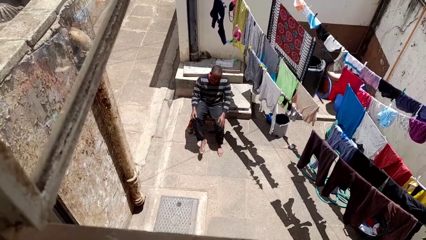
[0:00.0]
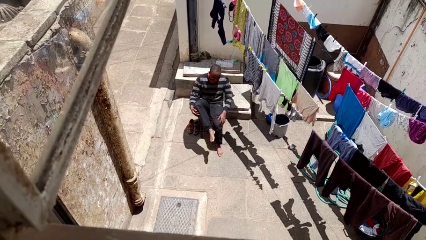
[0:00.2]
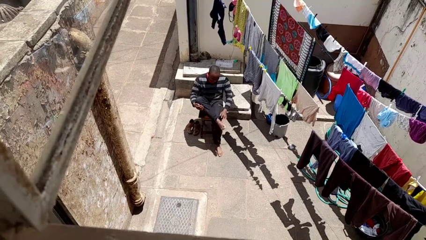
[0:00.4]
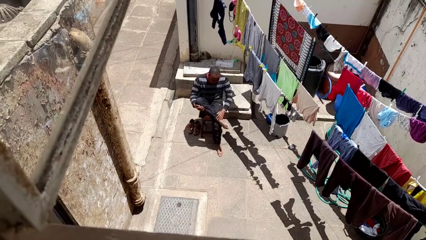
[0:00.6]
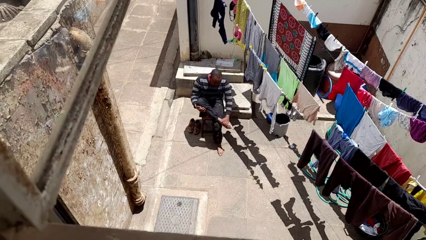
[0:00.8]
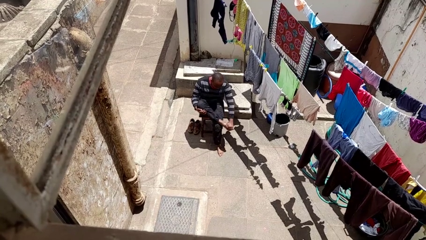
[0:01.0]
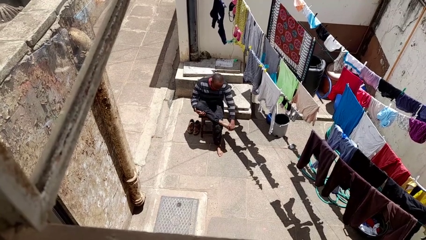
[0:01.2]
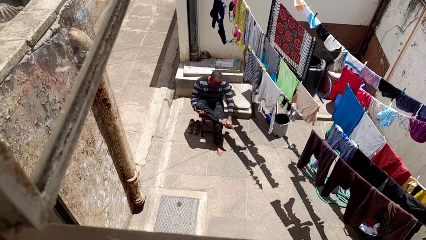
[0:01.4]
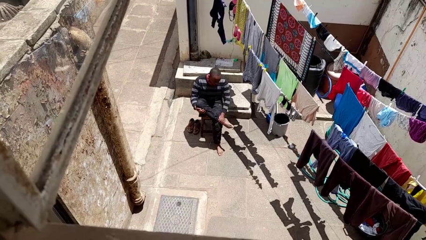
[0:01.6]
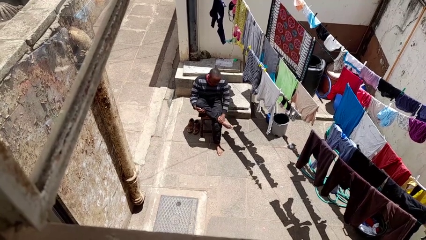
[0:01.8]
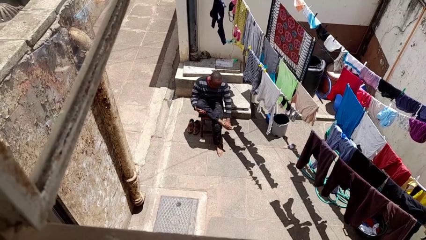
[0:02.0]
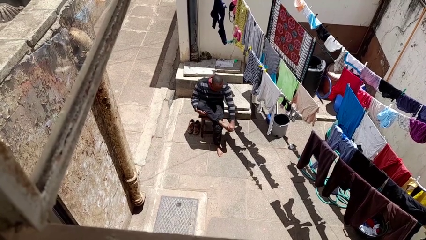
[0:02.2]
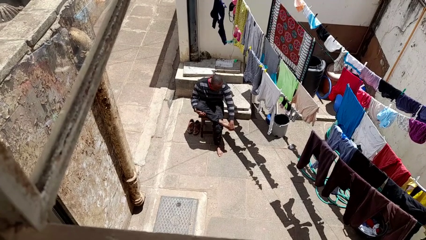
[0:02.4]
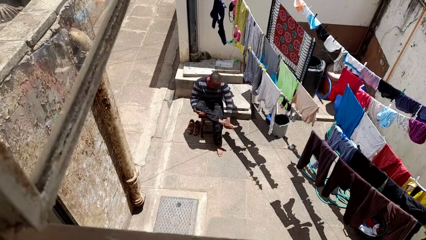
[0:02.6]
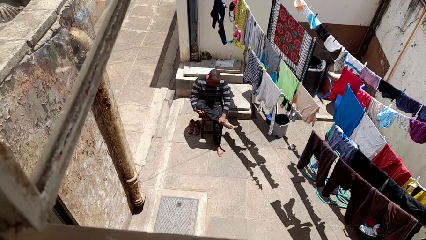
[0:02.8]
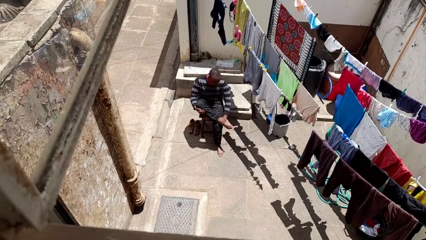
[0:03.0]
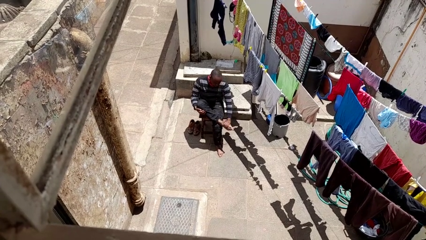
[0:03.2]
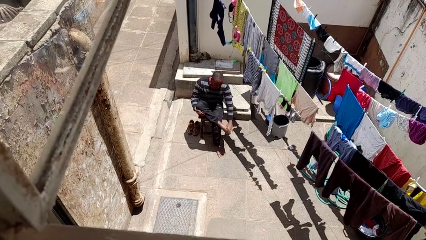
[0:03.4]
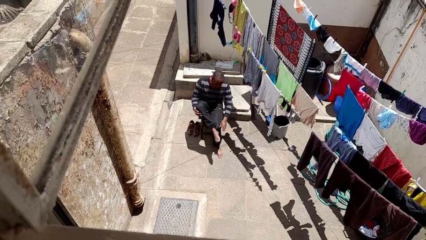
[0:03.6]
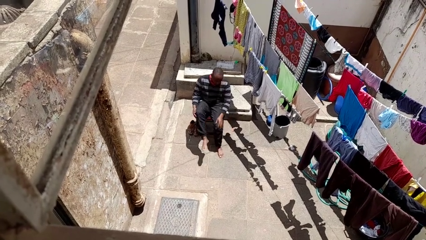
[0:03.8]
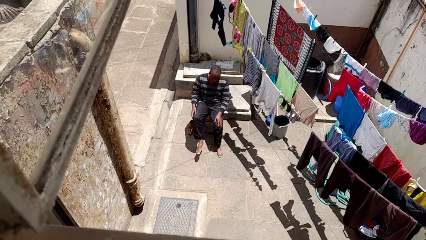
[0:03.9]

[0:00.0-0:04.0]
person rubs foot

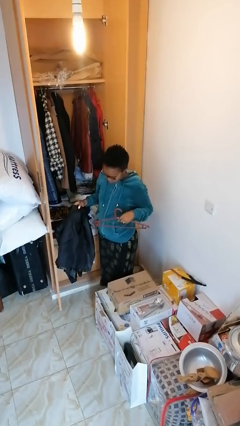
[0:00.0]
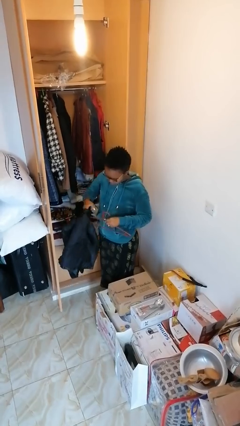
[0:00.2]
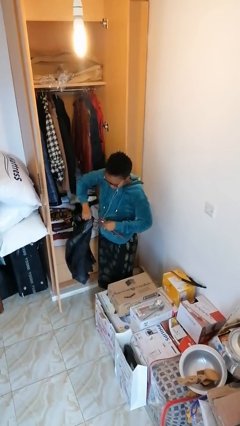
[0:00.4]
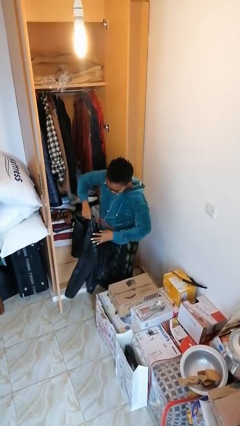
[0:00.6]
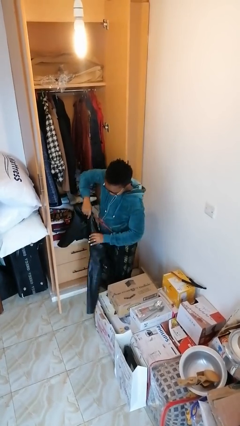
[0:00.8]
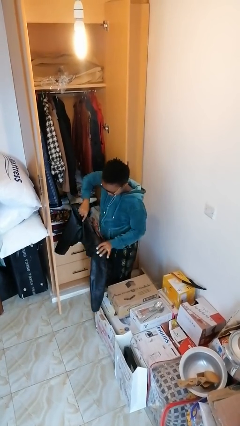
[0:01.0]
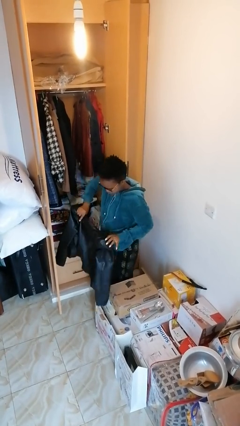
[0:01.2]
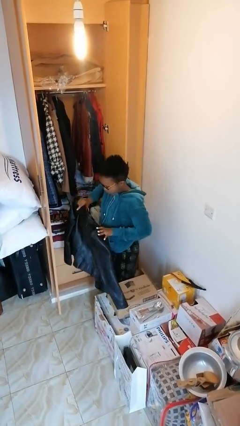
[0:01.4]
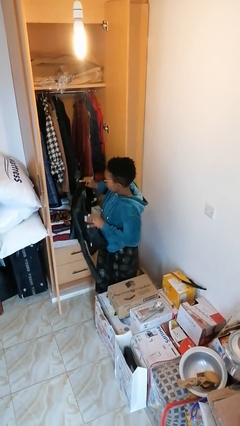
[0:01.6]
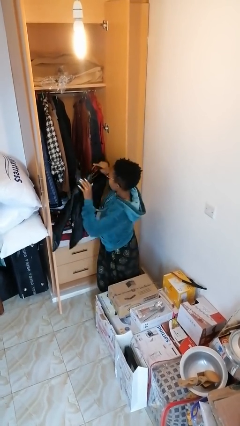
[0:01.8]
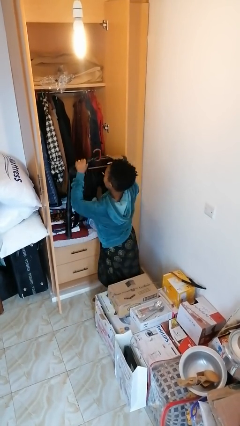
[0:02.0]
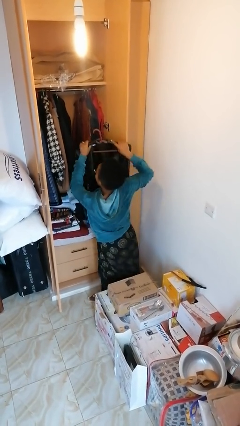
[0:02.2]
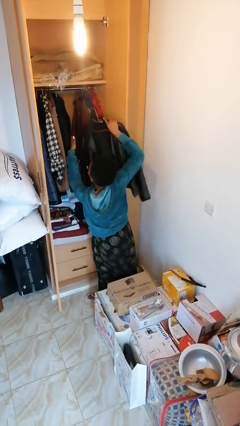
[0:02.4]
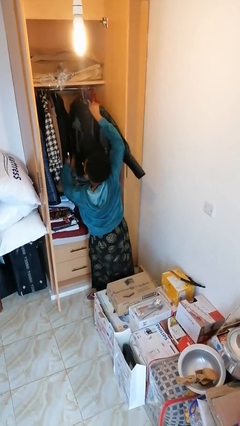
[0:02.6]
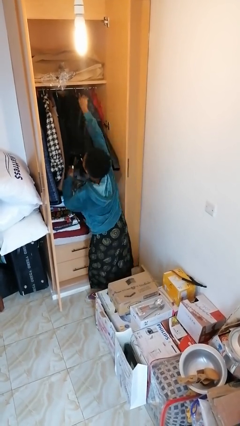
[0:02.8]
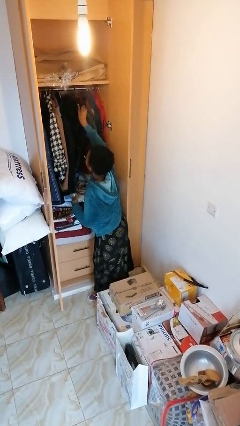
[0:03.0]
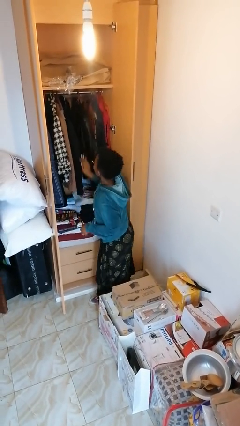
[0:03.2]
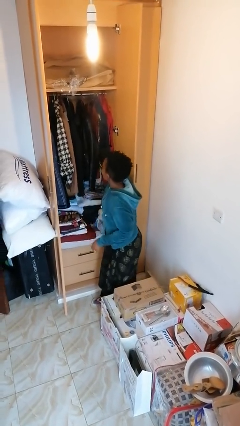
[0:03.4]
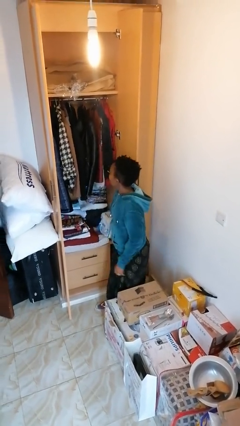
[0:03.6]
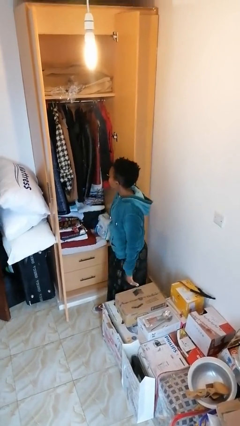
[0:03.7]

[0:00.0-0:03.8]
person puts clothes into closet

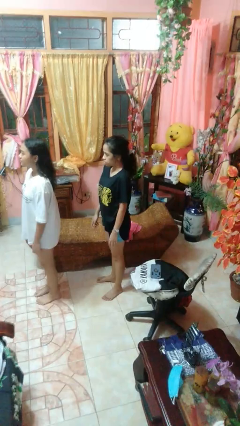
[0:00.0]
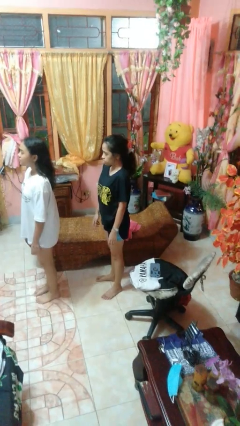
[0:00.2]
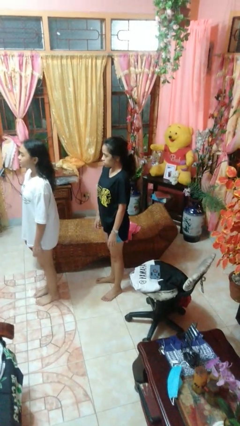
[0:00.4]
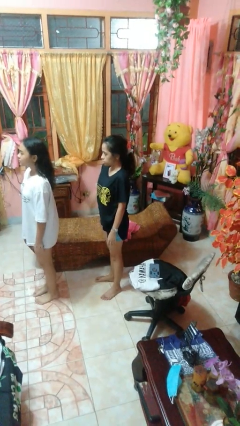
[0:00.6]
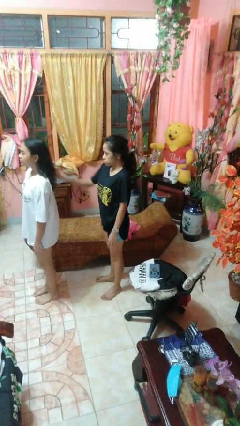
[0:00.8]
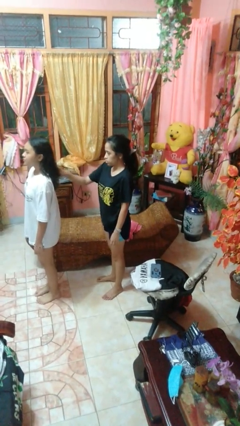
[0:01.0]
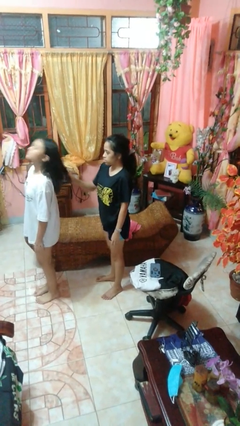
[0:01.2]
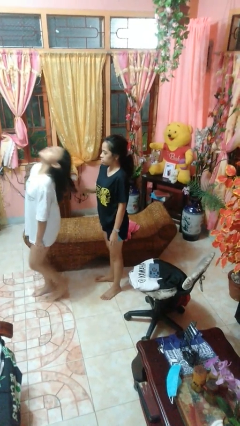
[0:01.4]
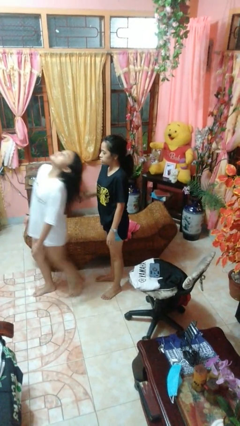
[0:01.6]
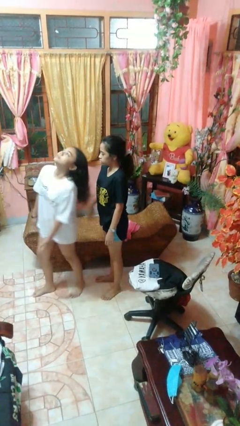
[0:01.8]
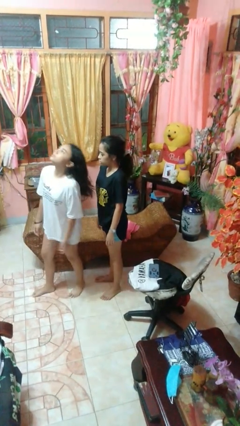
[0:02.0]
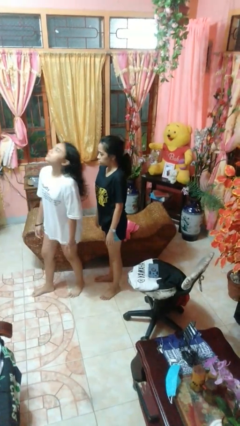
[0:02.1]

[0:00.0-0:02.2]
person grabs person by hair

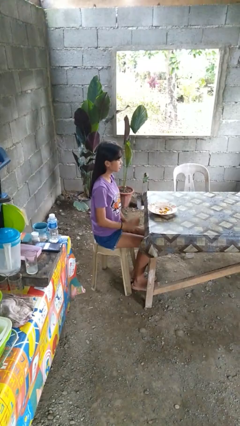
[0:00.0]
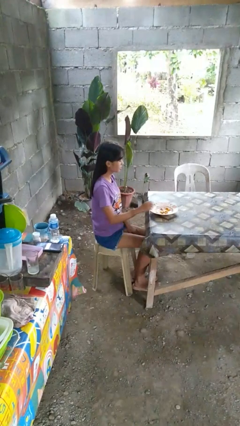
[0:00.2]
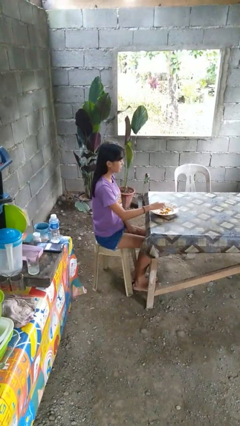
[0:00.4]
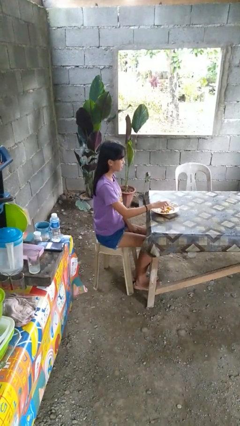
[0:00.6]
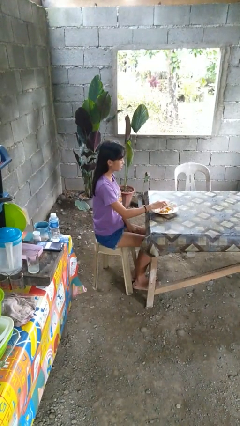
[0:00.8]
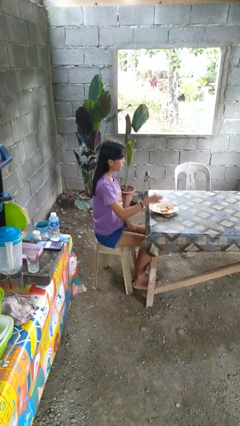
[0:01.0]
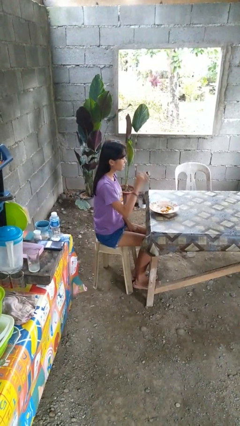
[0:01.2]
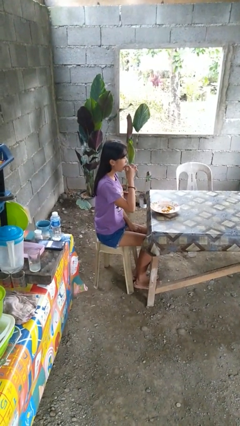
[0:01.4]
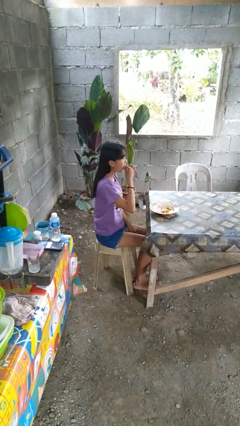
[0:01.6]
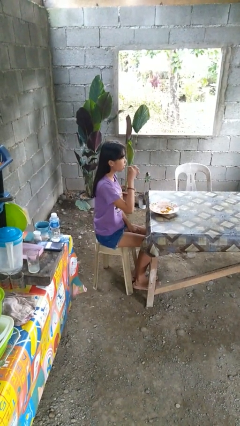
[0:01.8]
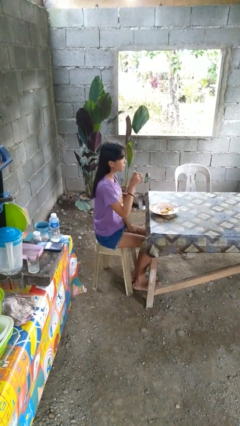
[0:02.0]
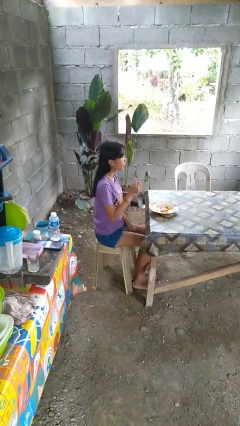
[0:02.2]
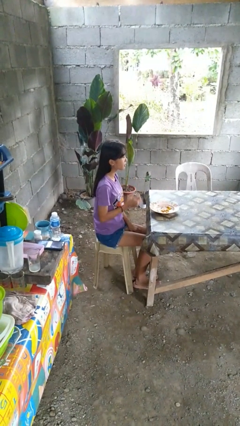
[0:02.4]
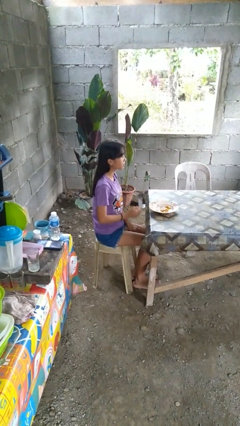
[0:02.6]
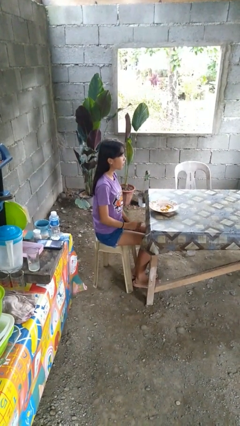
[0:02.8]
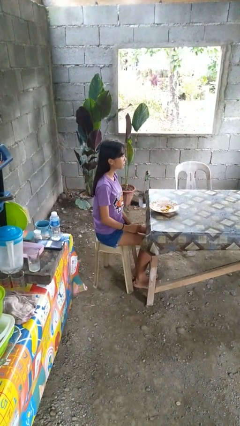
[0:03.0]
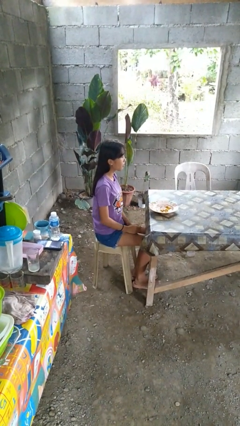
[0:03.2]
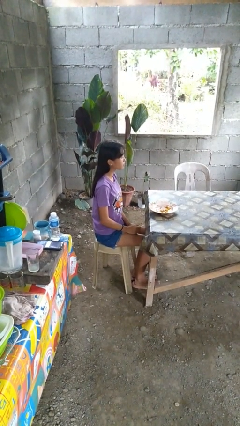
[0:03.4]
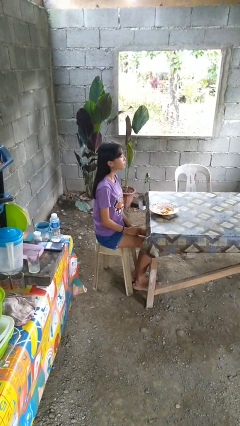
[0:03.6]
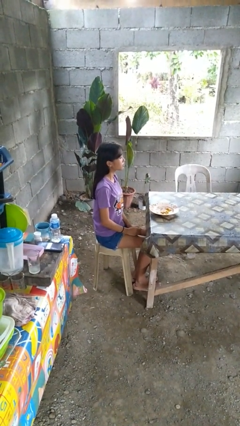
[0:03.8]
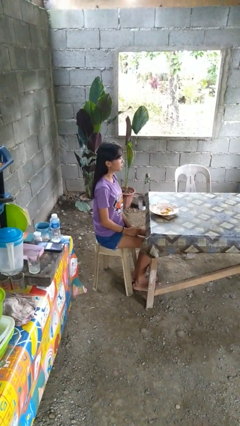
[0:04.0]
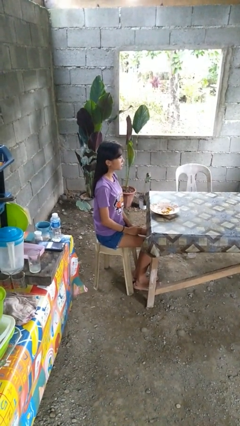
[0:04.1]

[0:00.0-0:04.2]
person eats with hands

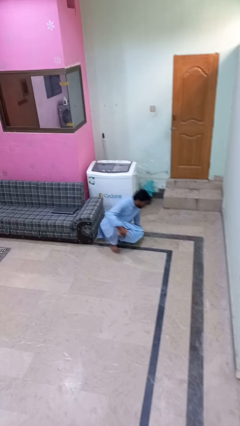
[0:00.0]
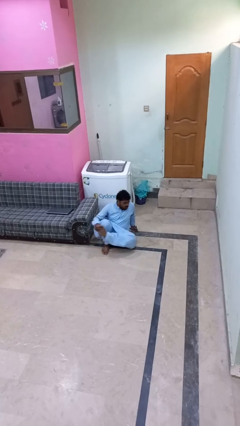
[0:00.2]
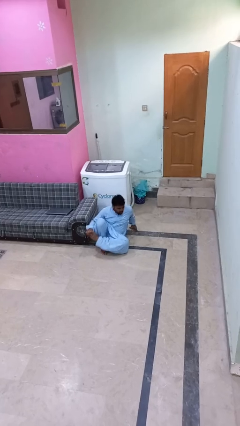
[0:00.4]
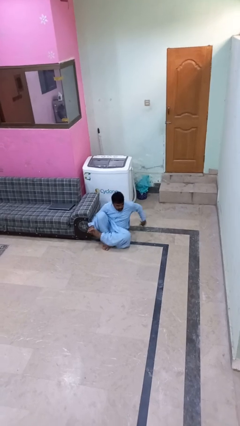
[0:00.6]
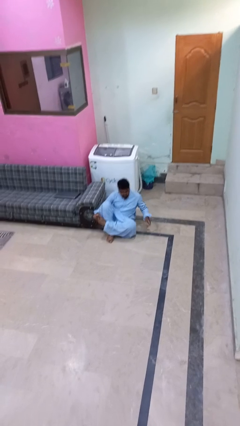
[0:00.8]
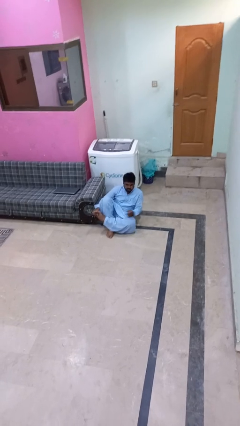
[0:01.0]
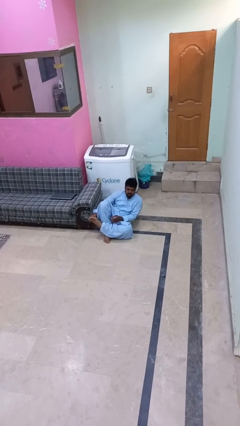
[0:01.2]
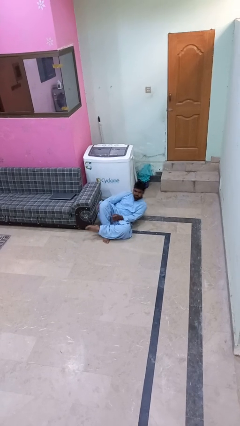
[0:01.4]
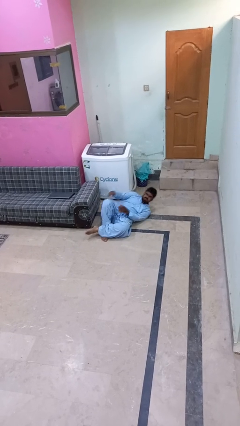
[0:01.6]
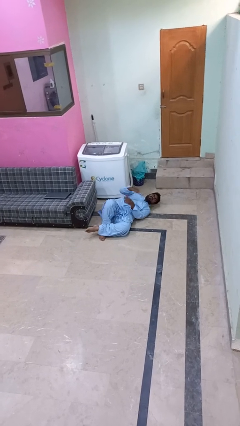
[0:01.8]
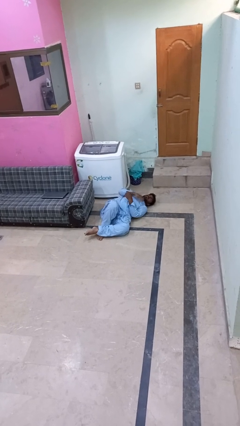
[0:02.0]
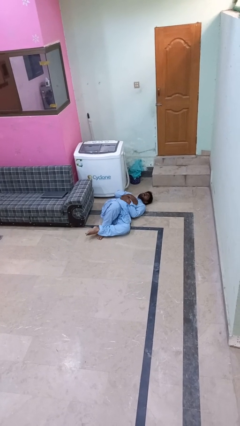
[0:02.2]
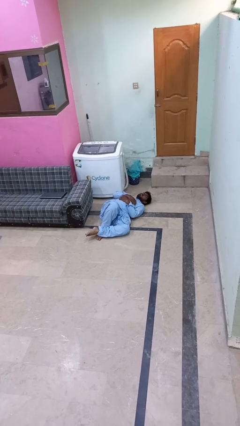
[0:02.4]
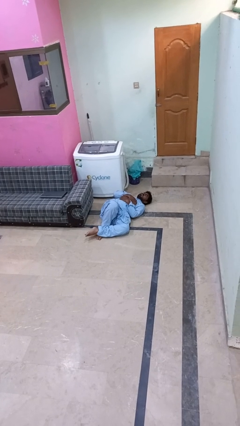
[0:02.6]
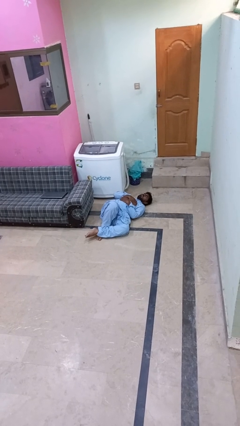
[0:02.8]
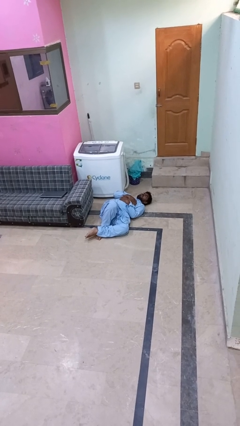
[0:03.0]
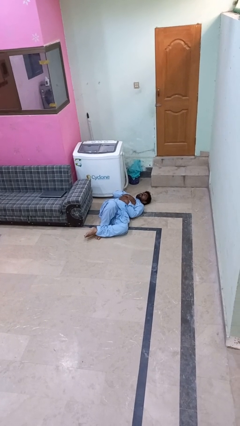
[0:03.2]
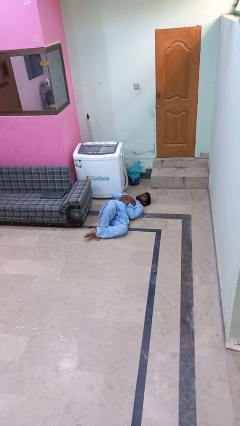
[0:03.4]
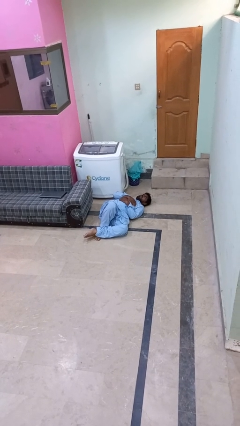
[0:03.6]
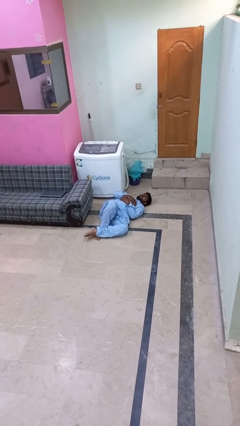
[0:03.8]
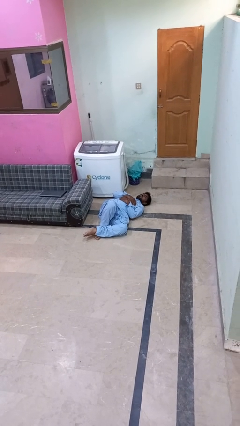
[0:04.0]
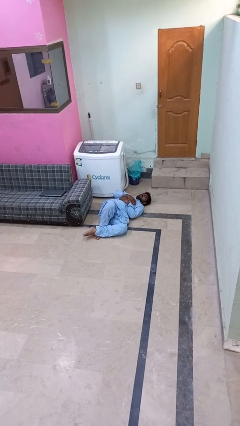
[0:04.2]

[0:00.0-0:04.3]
person lies down on floor
